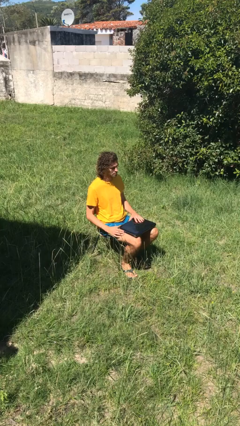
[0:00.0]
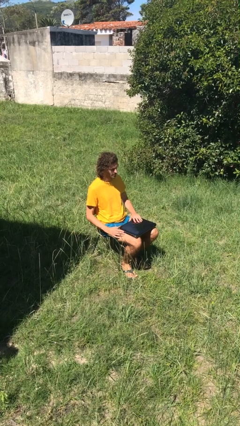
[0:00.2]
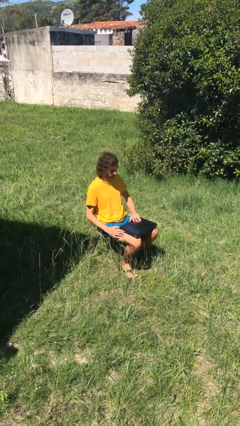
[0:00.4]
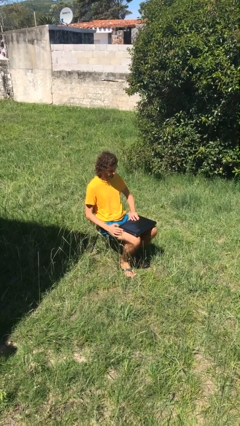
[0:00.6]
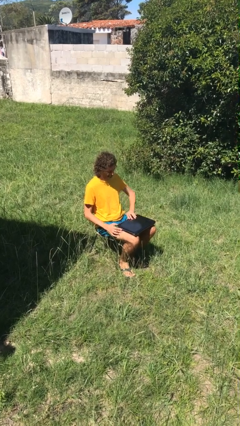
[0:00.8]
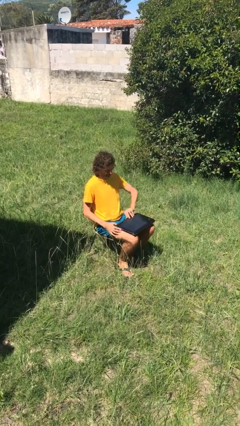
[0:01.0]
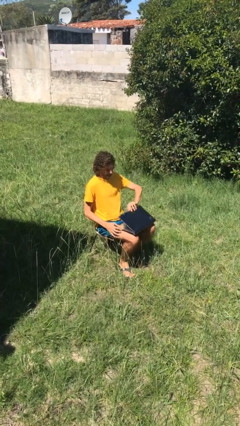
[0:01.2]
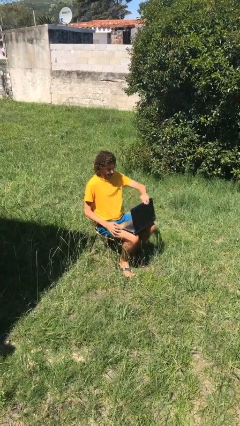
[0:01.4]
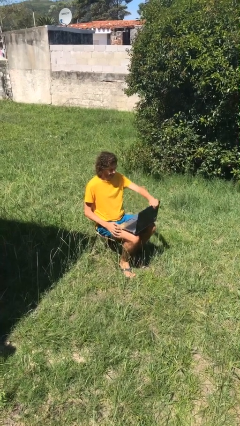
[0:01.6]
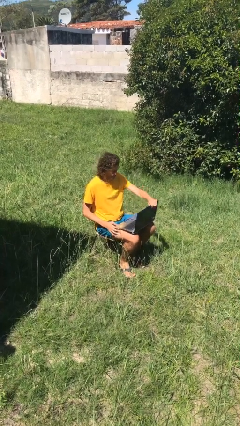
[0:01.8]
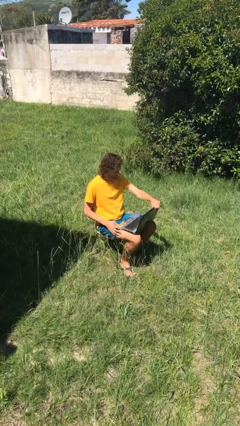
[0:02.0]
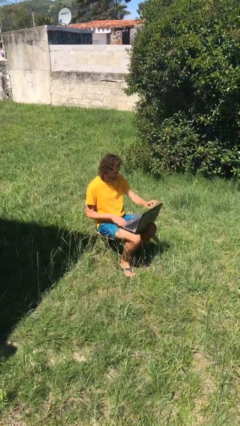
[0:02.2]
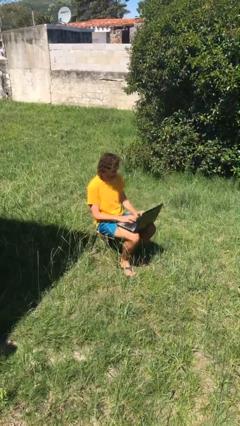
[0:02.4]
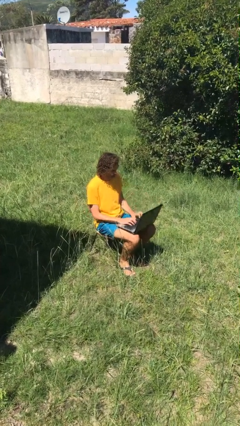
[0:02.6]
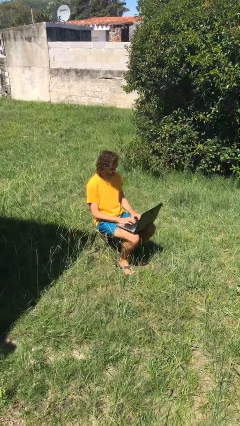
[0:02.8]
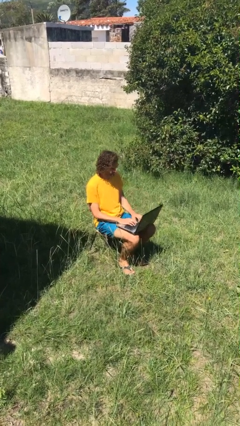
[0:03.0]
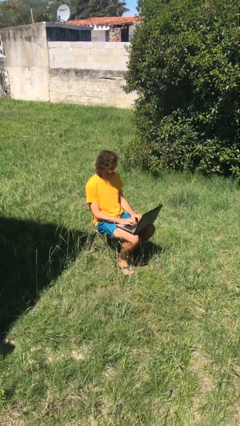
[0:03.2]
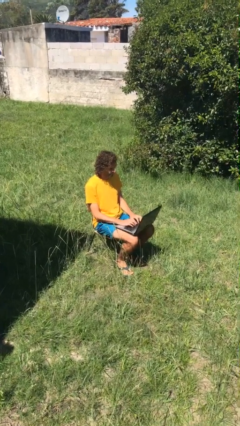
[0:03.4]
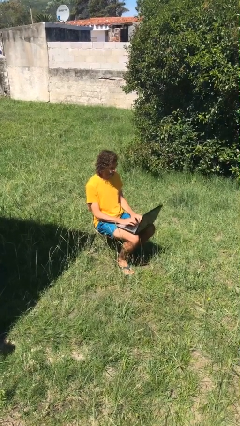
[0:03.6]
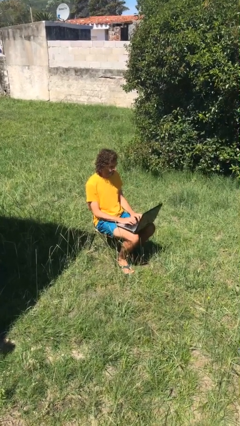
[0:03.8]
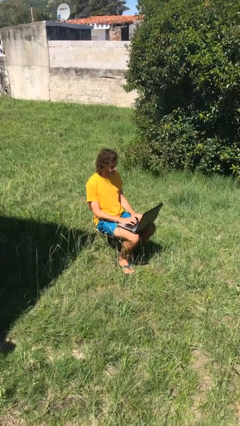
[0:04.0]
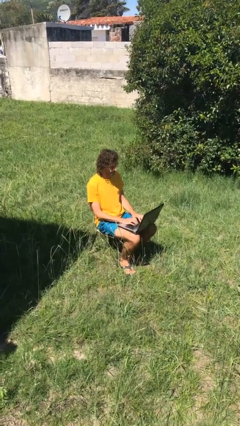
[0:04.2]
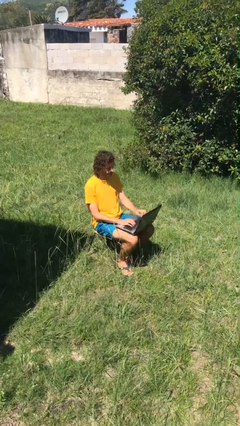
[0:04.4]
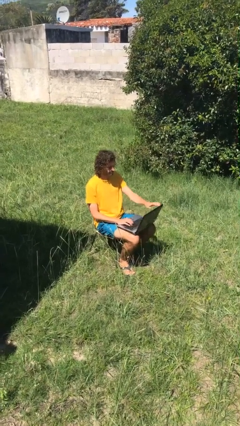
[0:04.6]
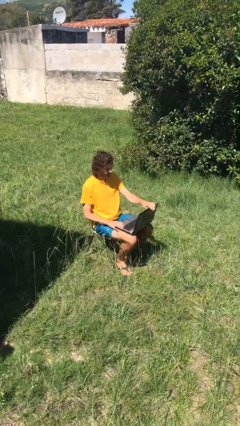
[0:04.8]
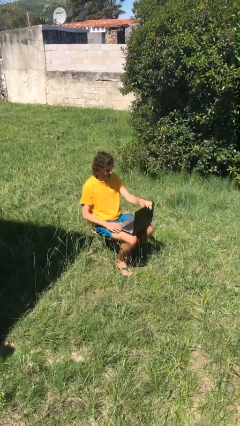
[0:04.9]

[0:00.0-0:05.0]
person interacts with laptop

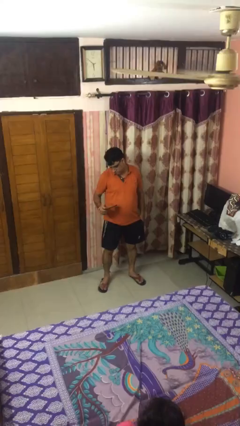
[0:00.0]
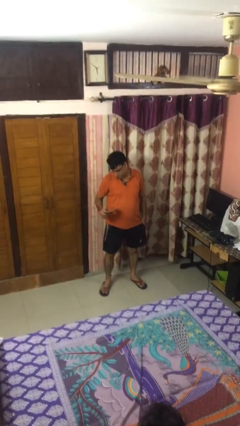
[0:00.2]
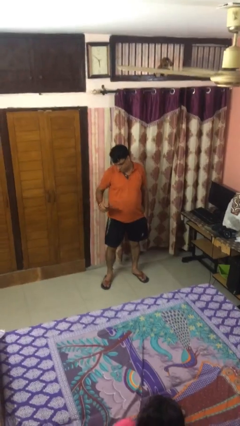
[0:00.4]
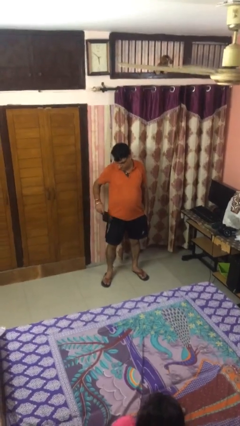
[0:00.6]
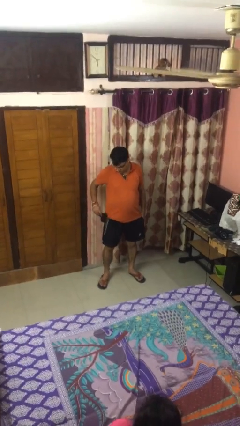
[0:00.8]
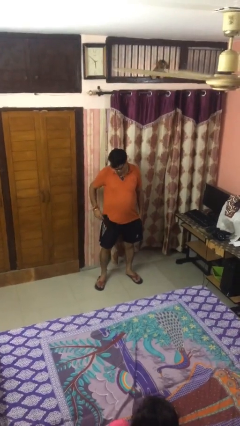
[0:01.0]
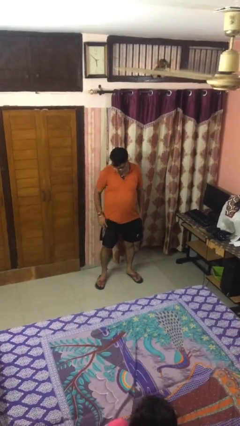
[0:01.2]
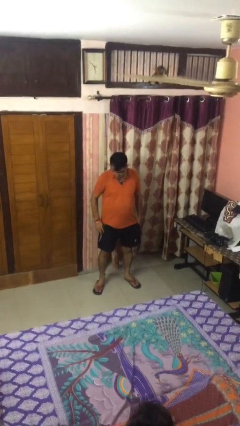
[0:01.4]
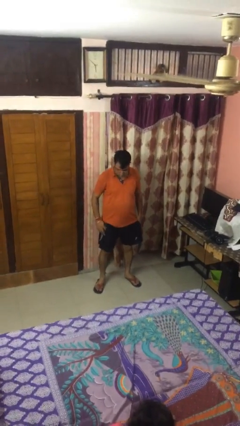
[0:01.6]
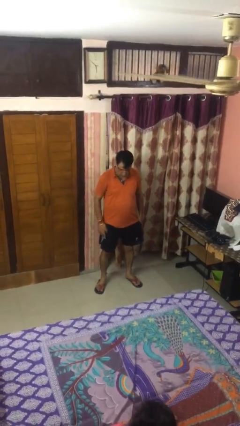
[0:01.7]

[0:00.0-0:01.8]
person puts phone into pocket

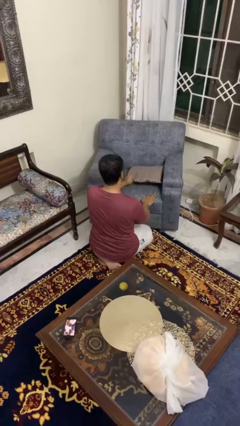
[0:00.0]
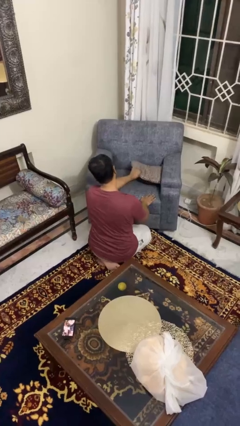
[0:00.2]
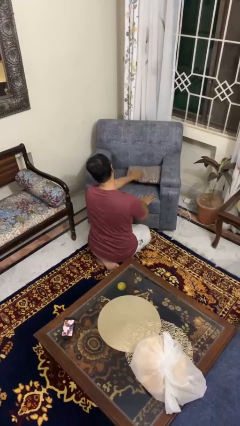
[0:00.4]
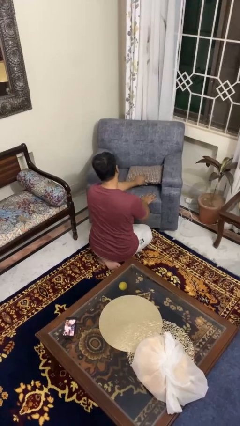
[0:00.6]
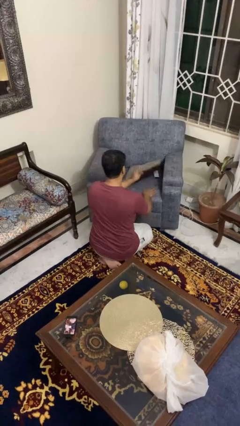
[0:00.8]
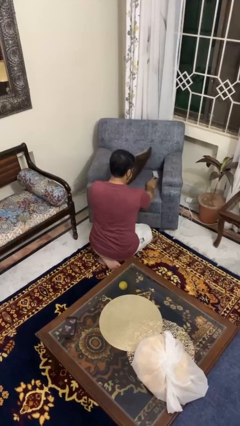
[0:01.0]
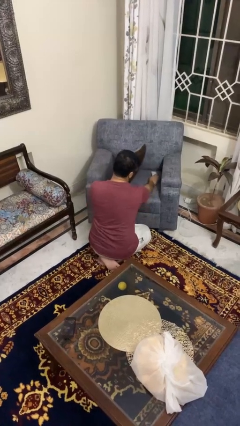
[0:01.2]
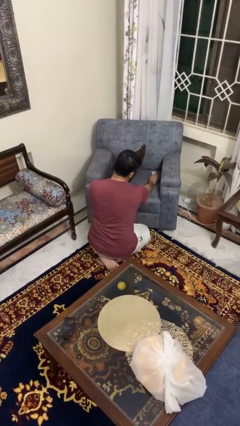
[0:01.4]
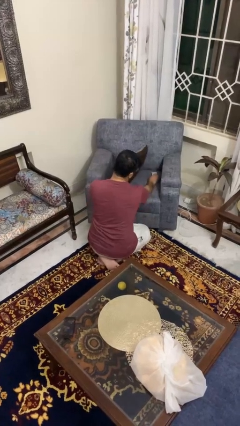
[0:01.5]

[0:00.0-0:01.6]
person searches in couch

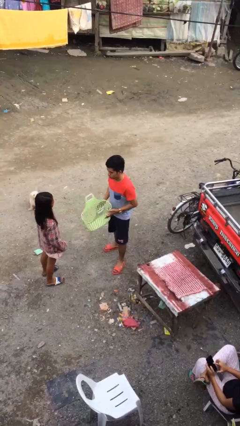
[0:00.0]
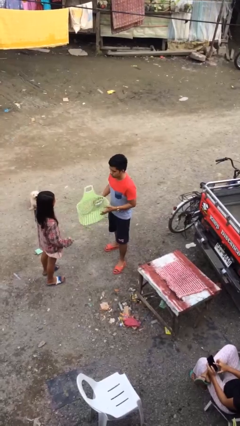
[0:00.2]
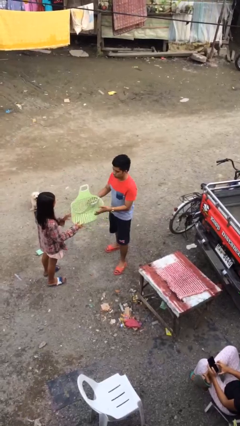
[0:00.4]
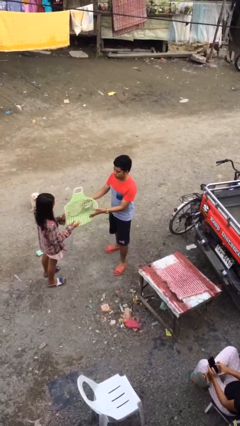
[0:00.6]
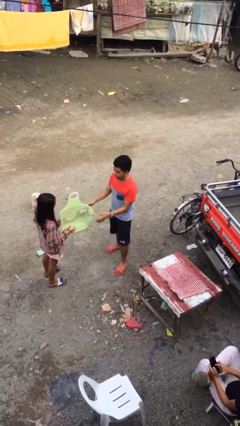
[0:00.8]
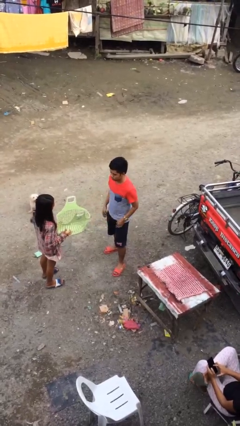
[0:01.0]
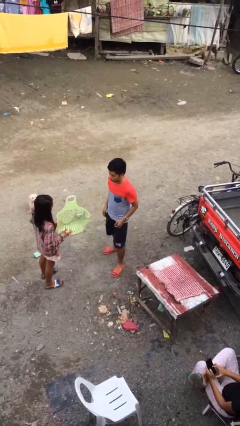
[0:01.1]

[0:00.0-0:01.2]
person transfers object to person

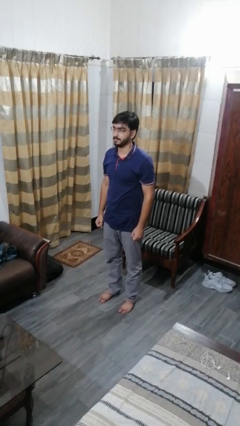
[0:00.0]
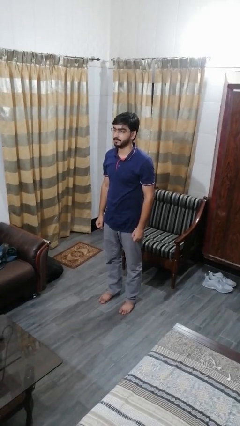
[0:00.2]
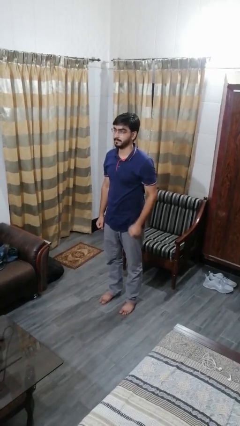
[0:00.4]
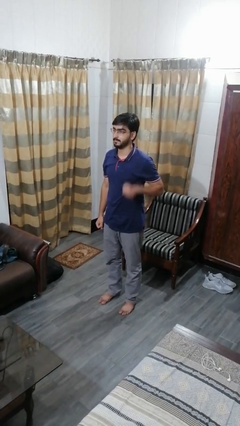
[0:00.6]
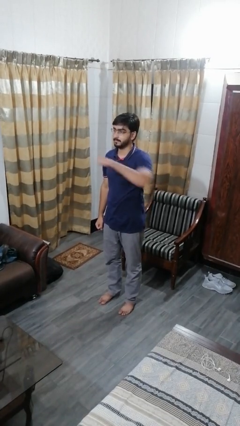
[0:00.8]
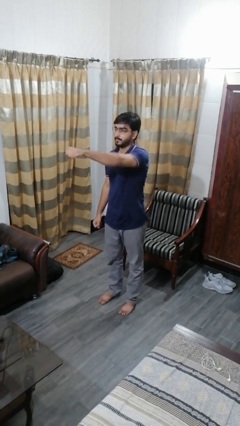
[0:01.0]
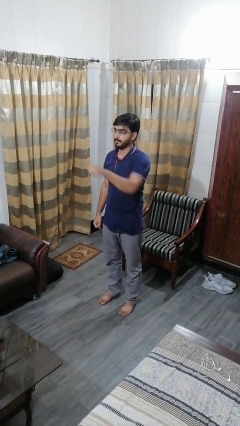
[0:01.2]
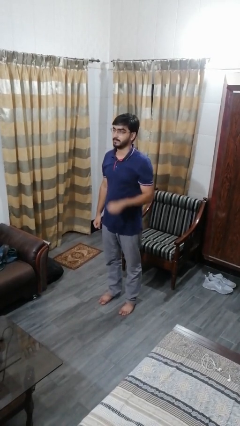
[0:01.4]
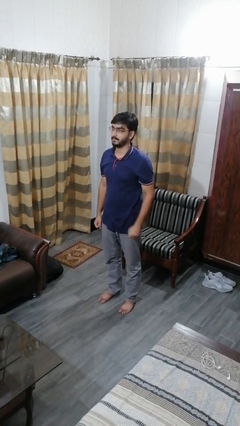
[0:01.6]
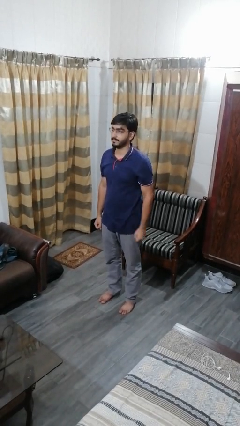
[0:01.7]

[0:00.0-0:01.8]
person punches

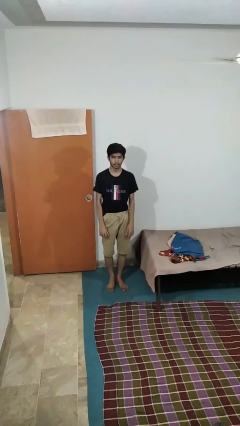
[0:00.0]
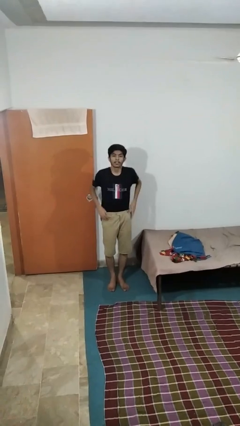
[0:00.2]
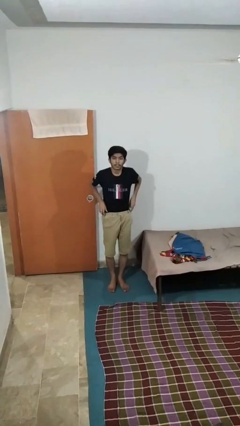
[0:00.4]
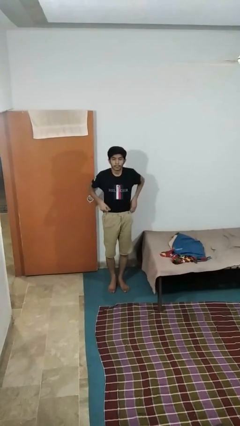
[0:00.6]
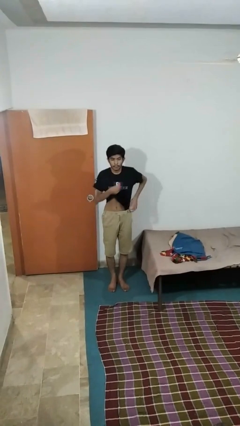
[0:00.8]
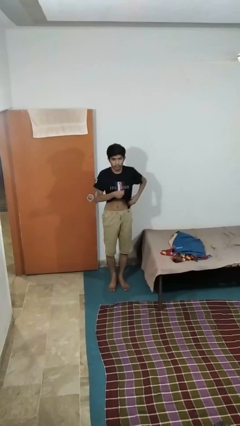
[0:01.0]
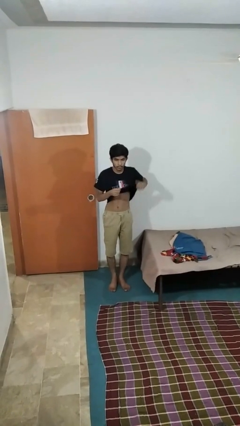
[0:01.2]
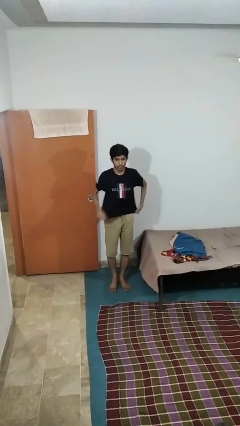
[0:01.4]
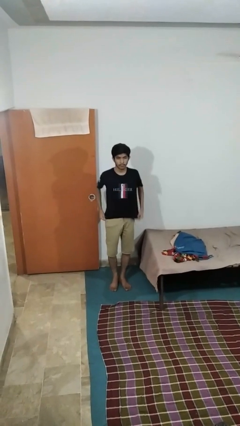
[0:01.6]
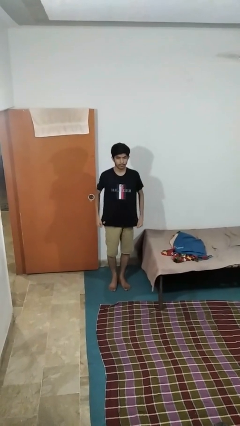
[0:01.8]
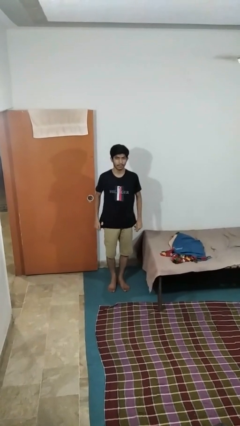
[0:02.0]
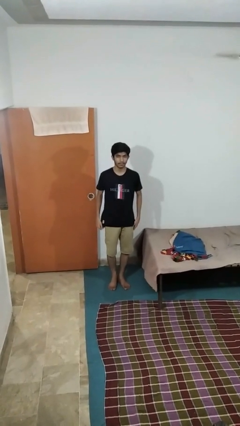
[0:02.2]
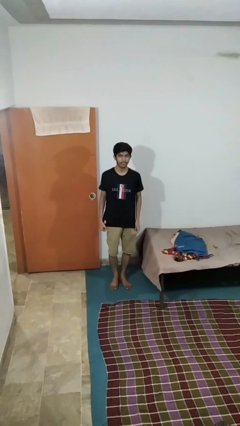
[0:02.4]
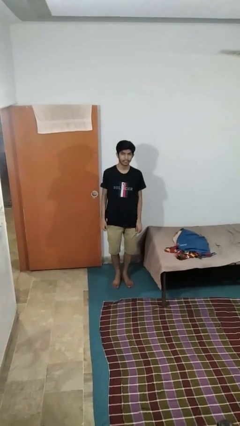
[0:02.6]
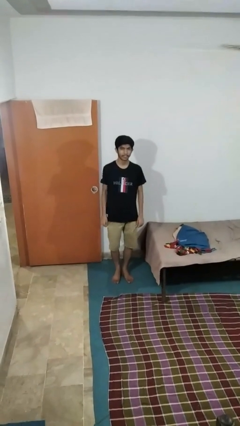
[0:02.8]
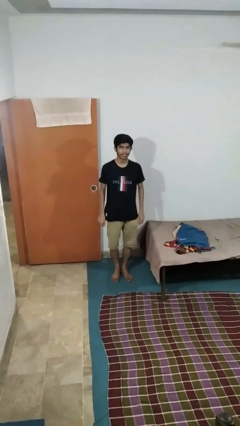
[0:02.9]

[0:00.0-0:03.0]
person untucks shirt

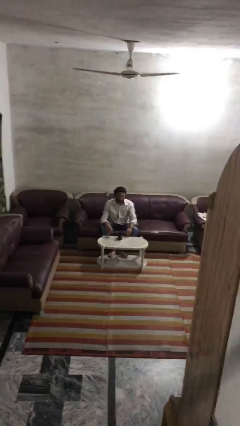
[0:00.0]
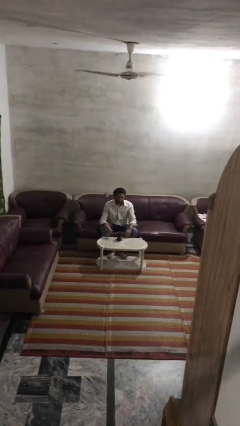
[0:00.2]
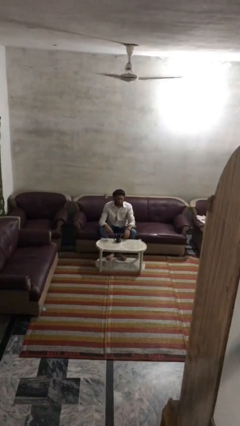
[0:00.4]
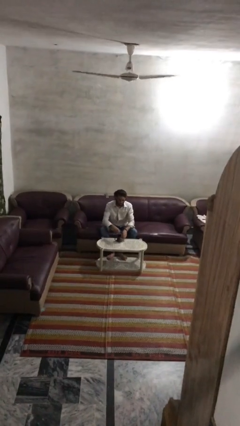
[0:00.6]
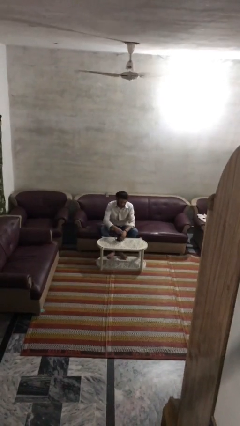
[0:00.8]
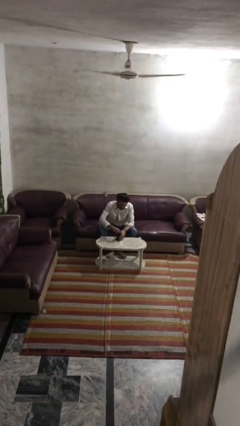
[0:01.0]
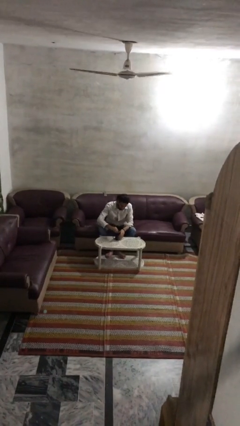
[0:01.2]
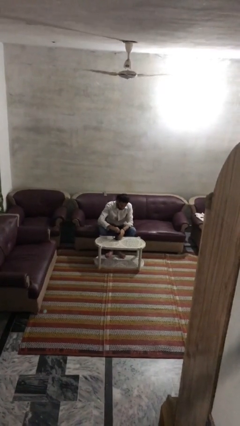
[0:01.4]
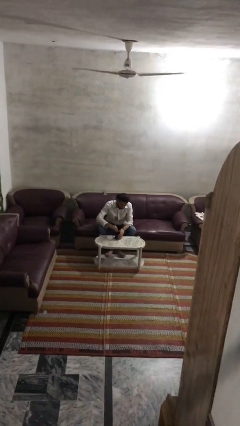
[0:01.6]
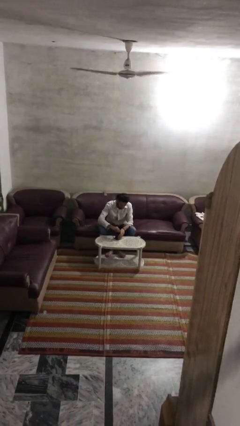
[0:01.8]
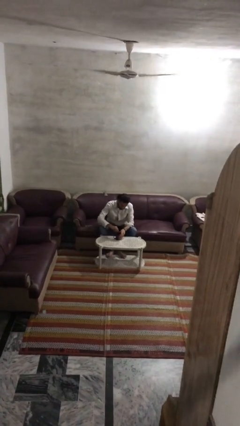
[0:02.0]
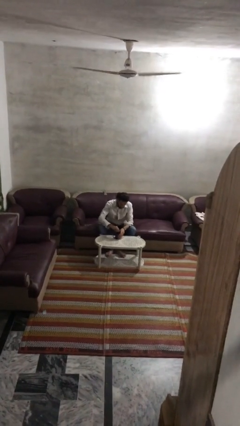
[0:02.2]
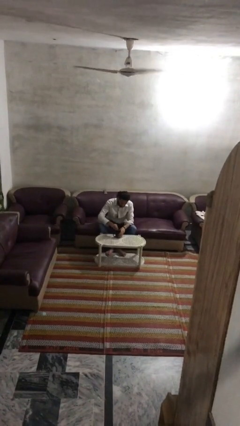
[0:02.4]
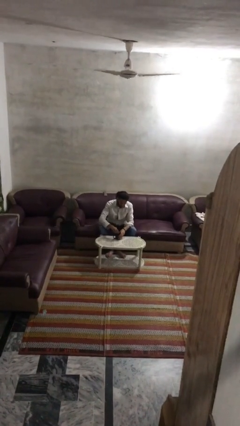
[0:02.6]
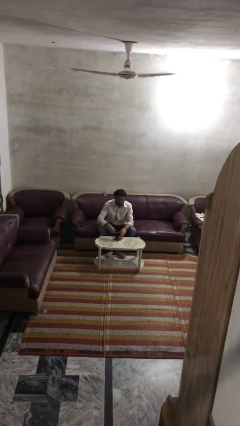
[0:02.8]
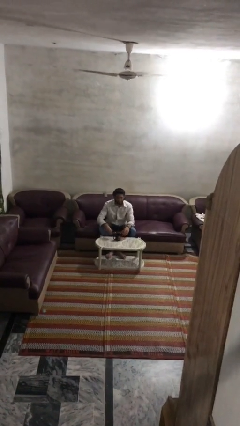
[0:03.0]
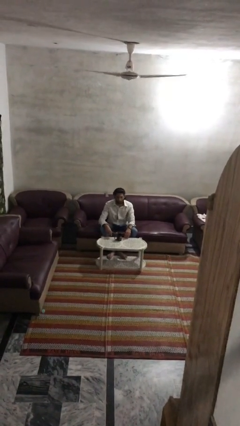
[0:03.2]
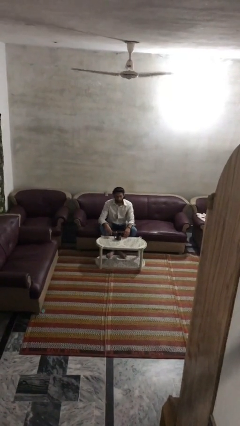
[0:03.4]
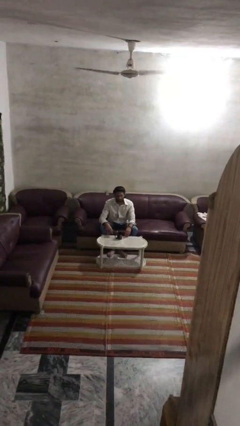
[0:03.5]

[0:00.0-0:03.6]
person stirs mug
